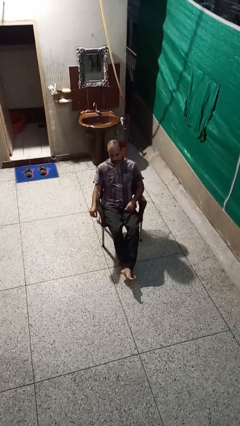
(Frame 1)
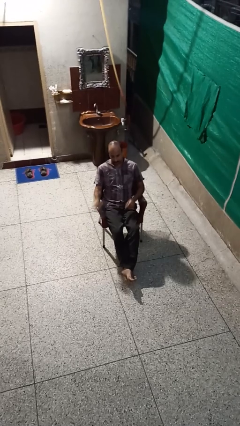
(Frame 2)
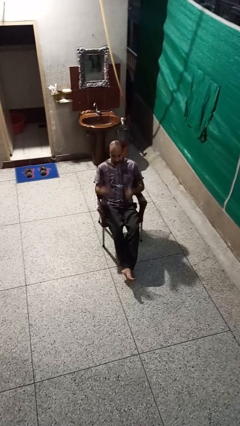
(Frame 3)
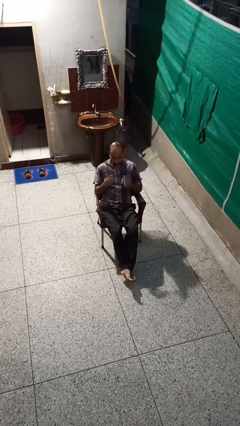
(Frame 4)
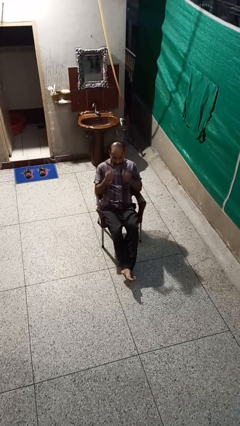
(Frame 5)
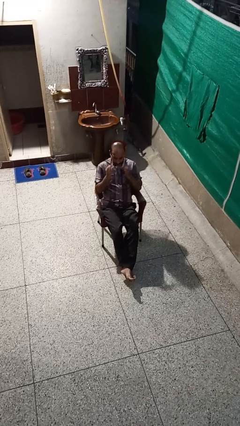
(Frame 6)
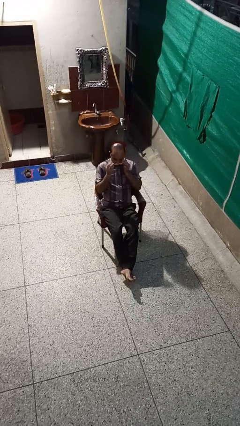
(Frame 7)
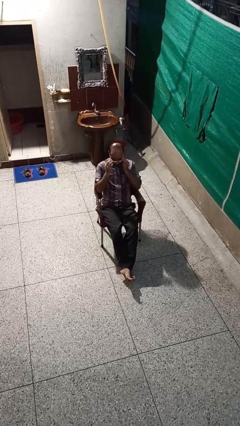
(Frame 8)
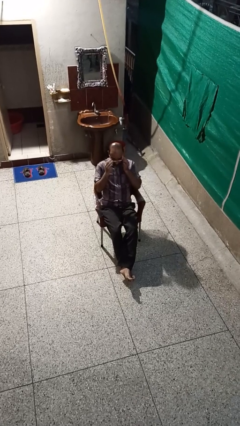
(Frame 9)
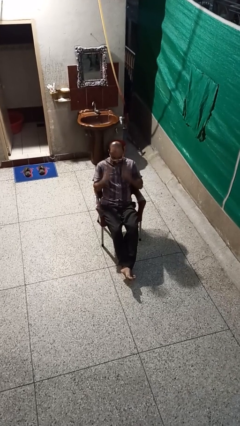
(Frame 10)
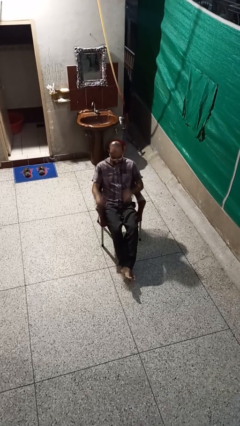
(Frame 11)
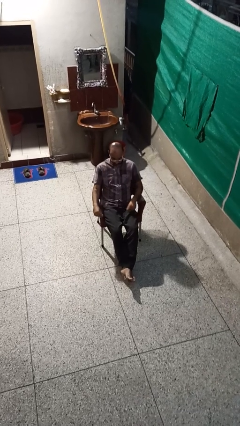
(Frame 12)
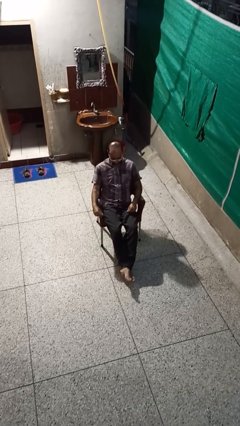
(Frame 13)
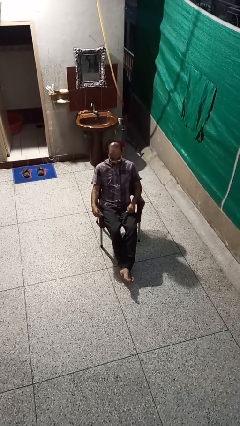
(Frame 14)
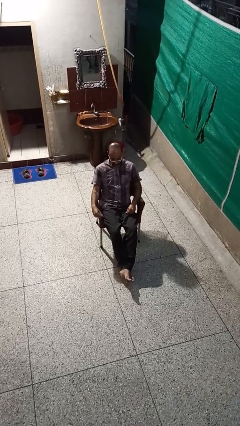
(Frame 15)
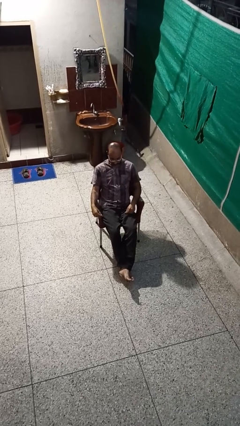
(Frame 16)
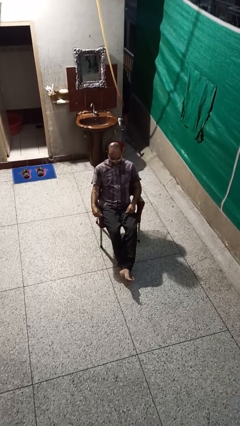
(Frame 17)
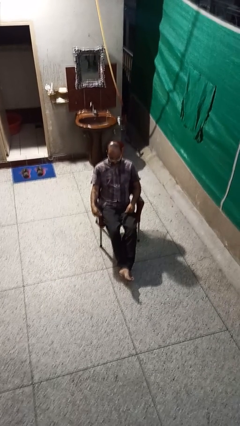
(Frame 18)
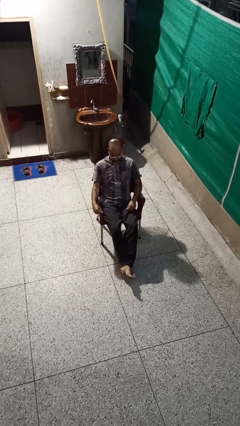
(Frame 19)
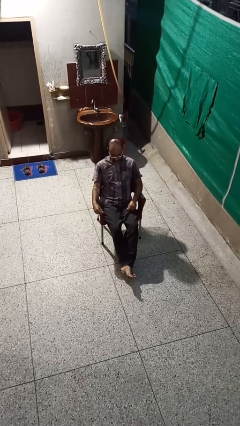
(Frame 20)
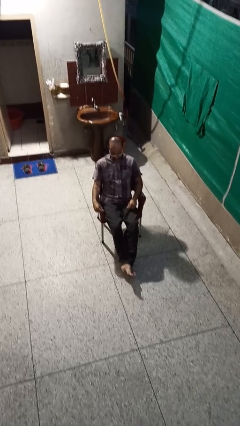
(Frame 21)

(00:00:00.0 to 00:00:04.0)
person puts on glasses

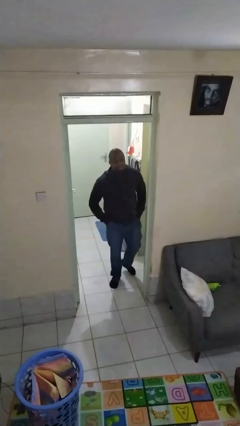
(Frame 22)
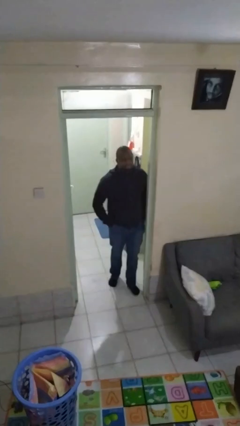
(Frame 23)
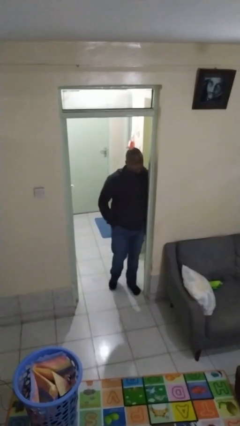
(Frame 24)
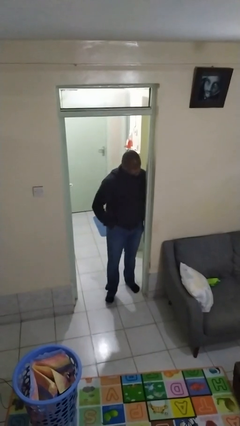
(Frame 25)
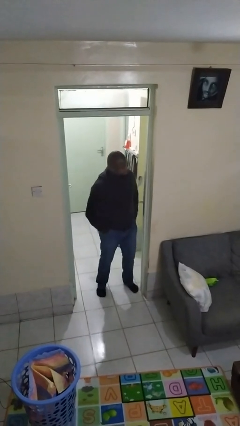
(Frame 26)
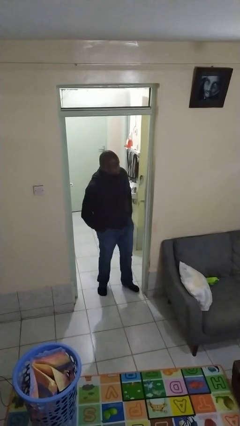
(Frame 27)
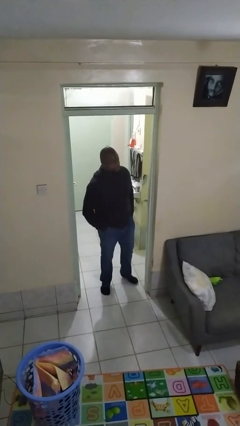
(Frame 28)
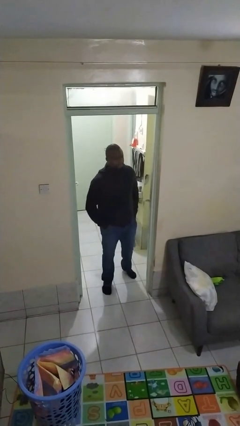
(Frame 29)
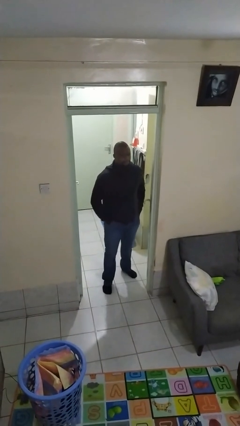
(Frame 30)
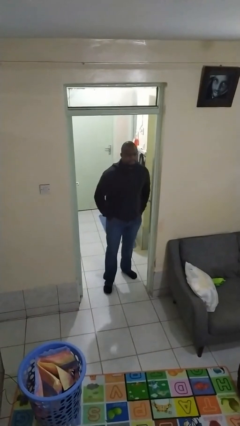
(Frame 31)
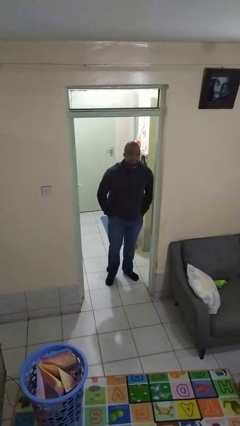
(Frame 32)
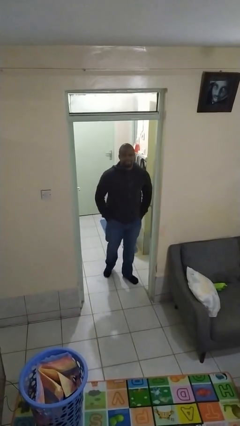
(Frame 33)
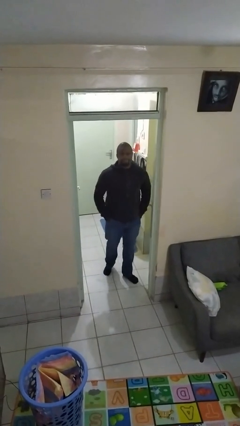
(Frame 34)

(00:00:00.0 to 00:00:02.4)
person bumps into wall

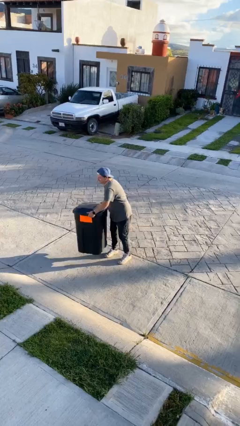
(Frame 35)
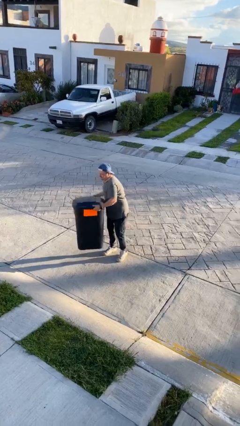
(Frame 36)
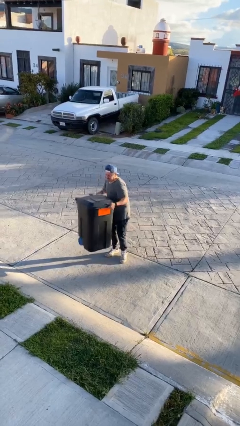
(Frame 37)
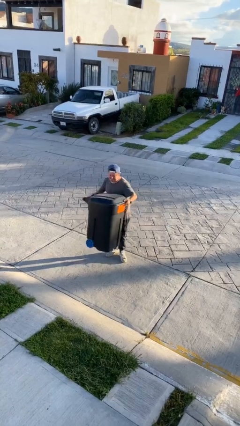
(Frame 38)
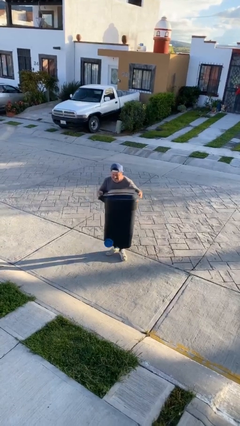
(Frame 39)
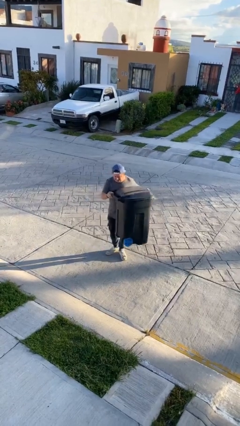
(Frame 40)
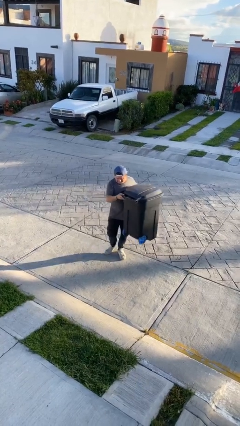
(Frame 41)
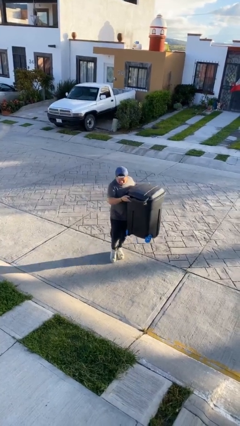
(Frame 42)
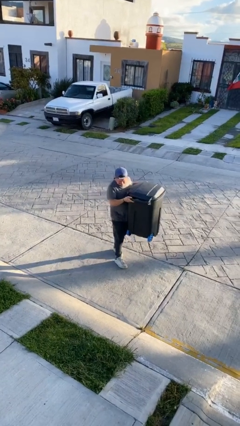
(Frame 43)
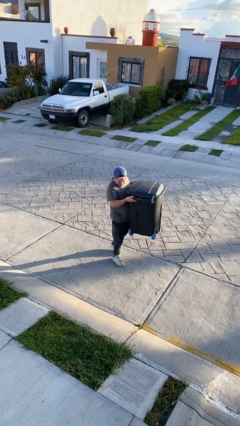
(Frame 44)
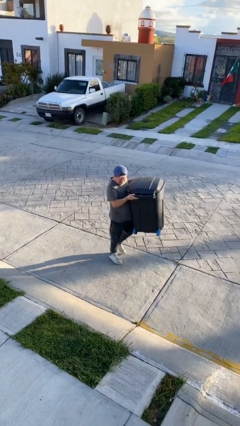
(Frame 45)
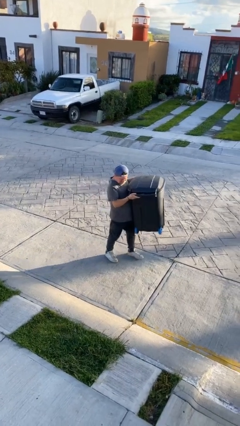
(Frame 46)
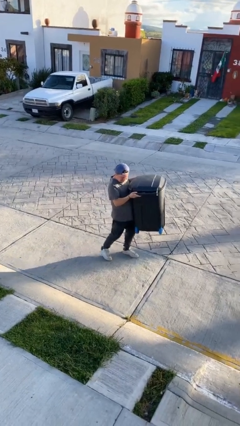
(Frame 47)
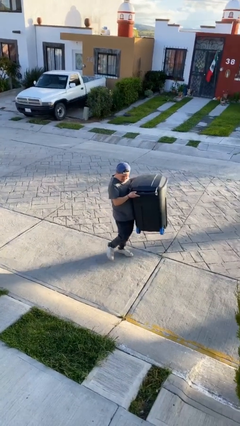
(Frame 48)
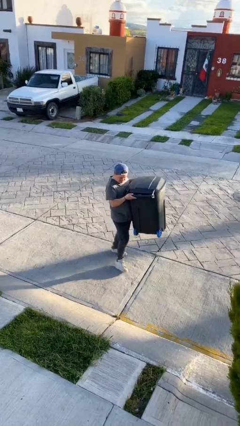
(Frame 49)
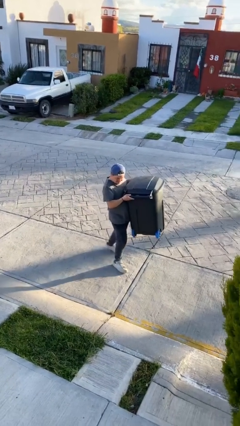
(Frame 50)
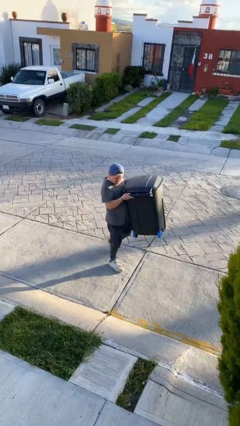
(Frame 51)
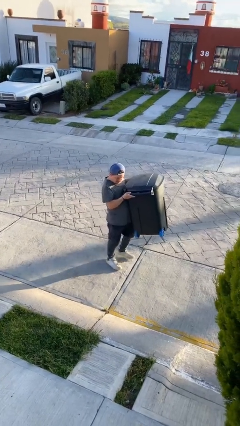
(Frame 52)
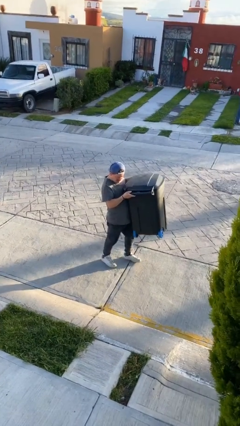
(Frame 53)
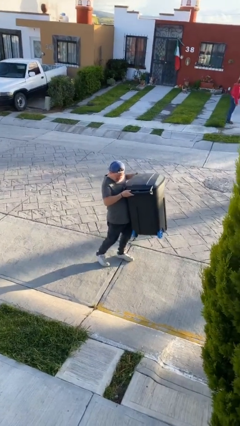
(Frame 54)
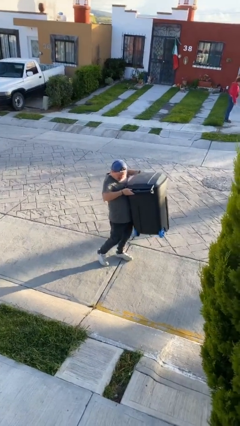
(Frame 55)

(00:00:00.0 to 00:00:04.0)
person carries heavy object

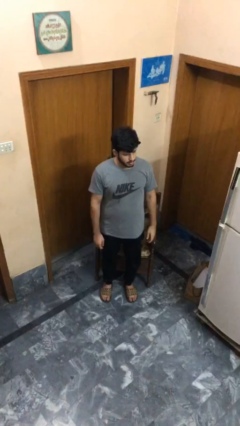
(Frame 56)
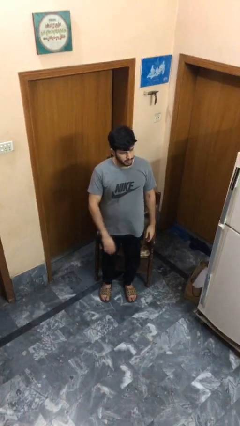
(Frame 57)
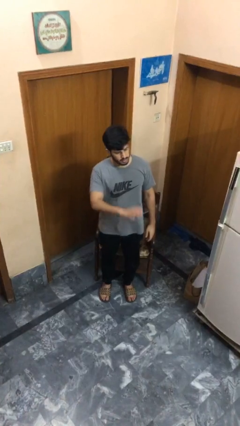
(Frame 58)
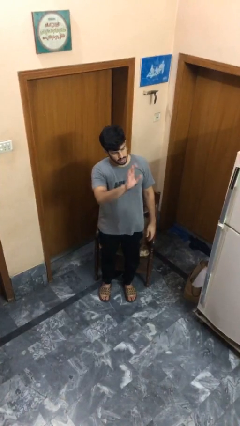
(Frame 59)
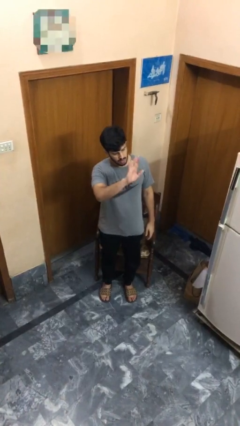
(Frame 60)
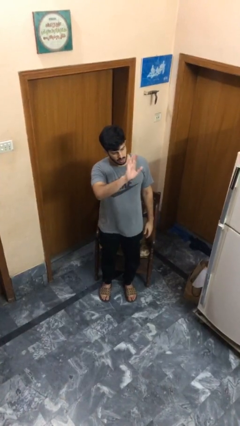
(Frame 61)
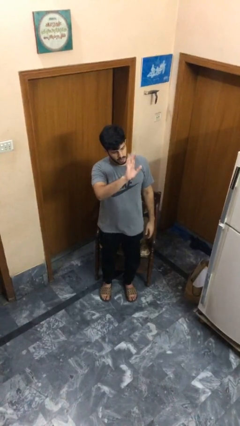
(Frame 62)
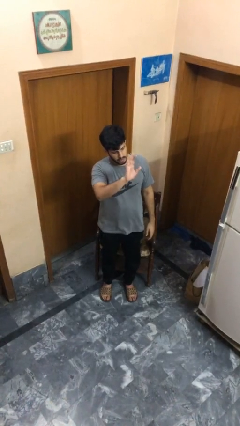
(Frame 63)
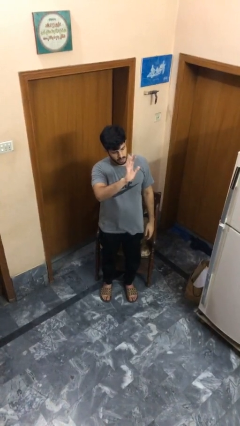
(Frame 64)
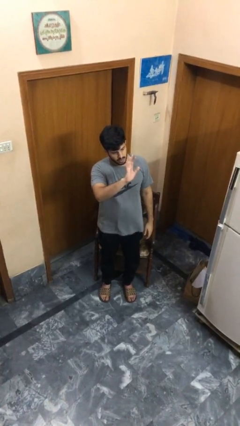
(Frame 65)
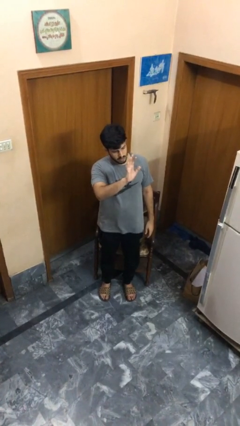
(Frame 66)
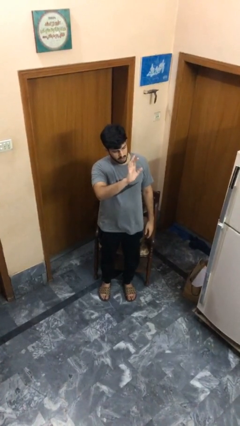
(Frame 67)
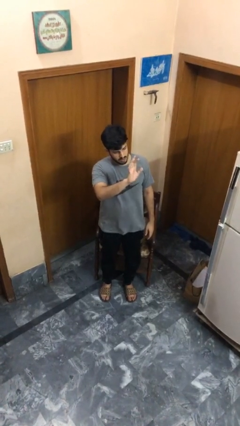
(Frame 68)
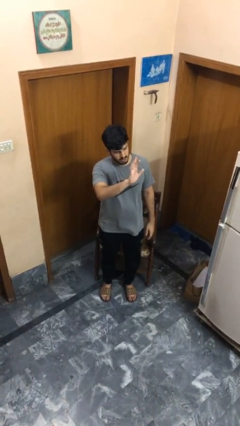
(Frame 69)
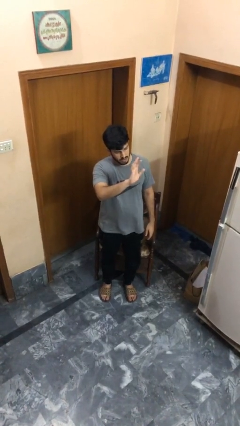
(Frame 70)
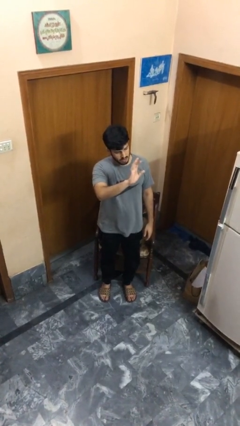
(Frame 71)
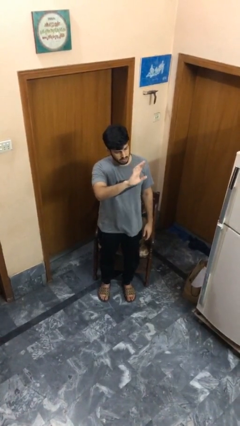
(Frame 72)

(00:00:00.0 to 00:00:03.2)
person waves at person

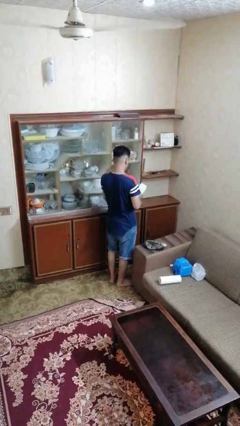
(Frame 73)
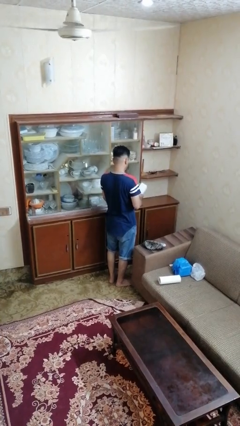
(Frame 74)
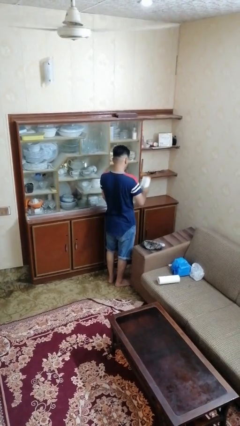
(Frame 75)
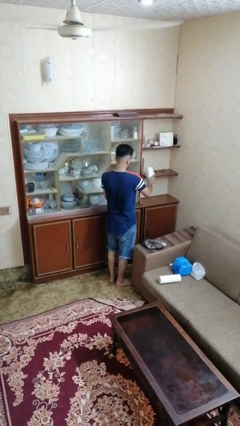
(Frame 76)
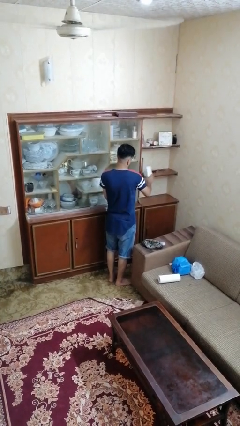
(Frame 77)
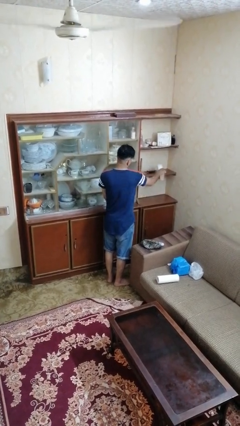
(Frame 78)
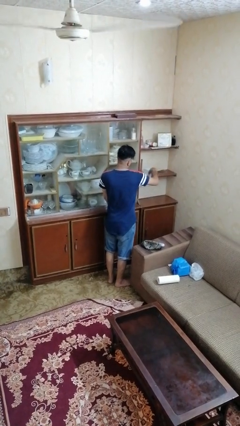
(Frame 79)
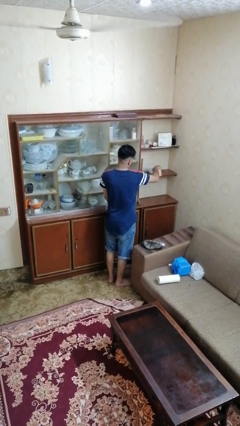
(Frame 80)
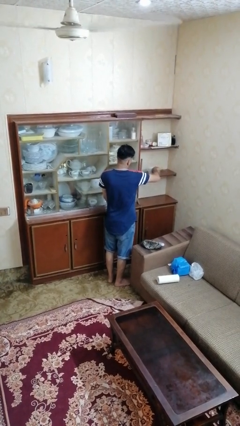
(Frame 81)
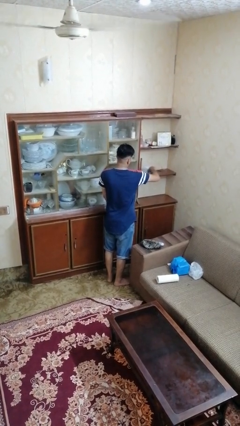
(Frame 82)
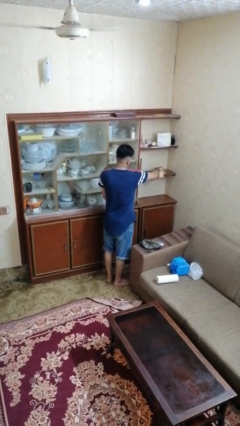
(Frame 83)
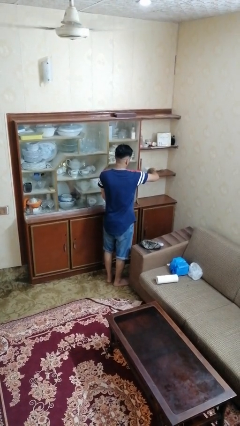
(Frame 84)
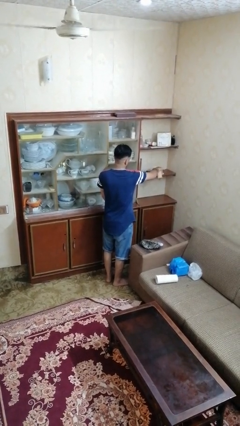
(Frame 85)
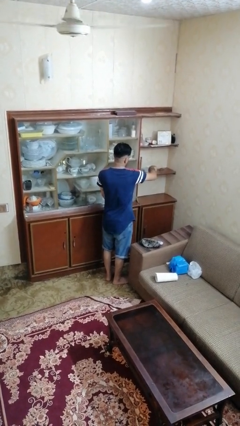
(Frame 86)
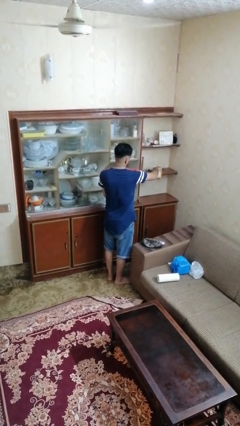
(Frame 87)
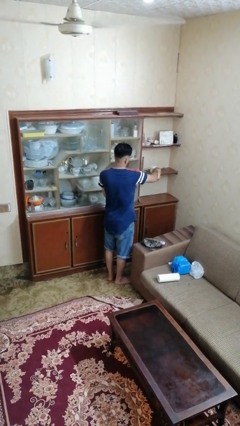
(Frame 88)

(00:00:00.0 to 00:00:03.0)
person dusts furniture

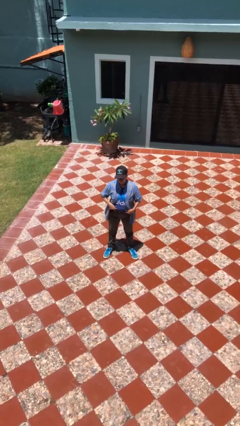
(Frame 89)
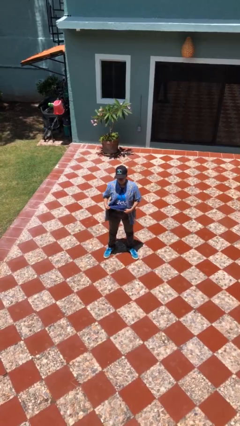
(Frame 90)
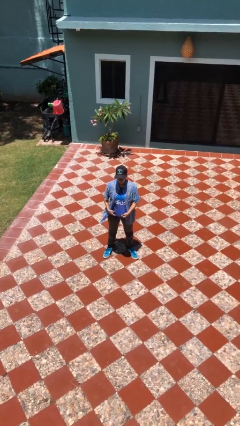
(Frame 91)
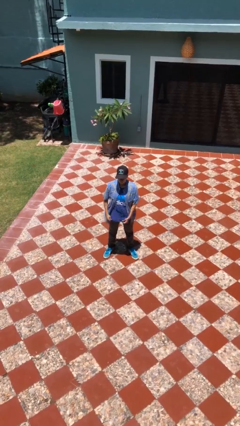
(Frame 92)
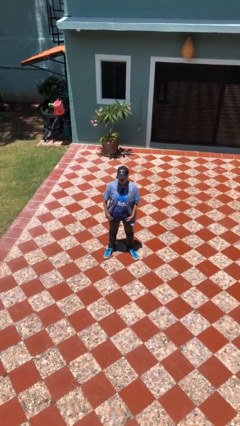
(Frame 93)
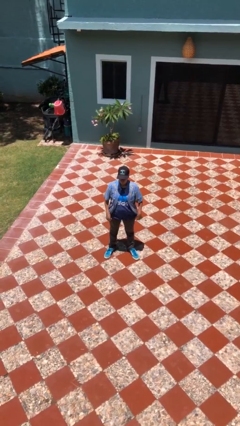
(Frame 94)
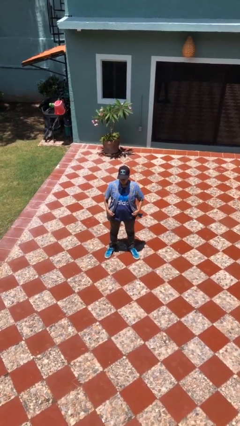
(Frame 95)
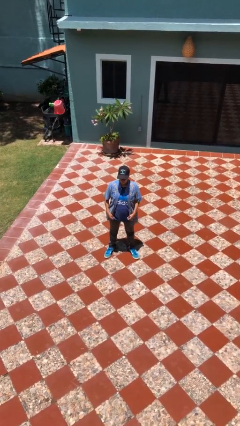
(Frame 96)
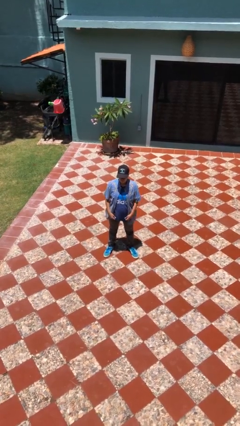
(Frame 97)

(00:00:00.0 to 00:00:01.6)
person untucks shirt
